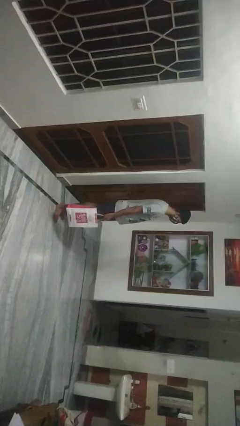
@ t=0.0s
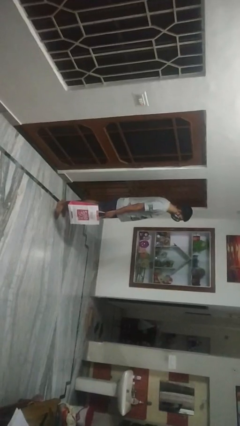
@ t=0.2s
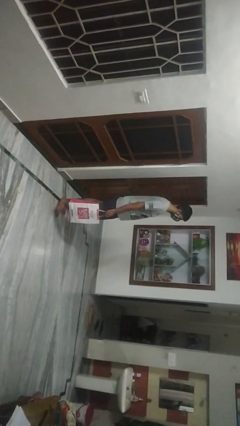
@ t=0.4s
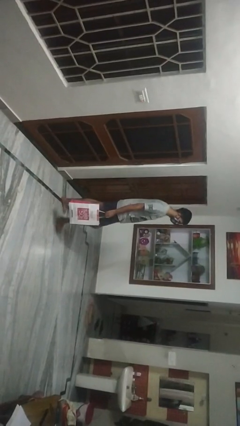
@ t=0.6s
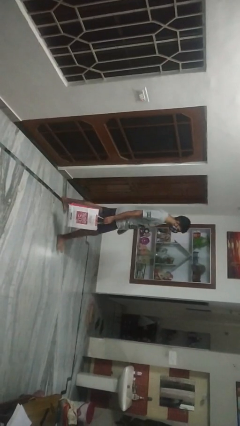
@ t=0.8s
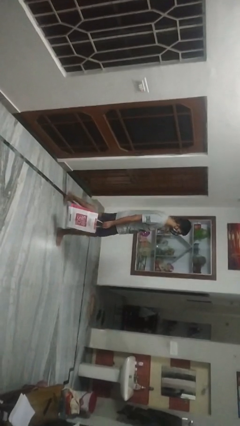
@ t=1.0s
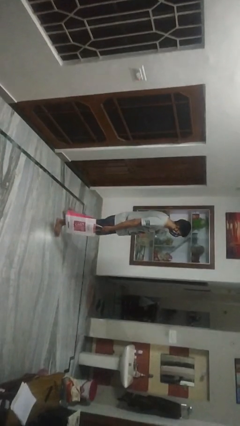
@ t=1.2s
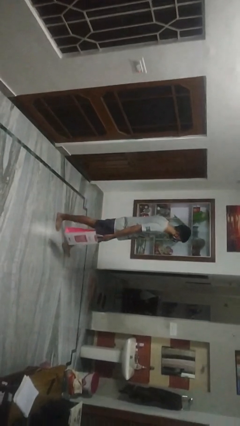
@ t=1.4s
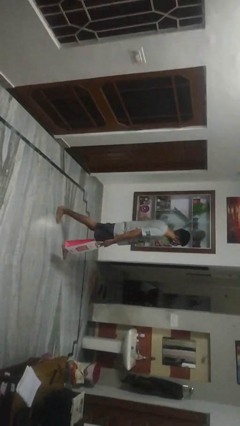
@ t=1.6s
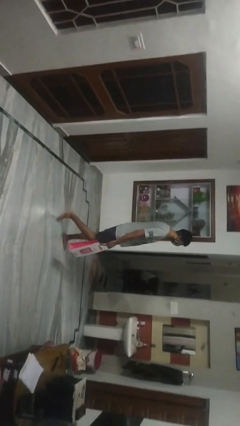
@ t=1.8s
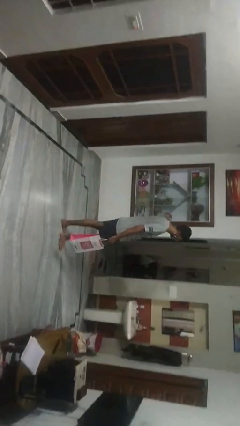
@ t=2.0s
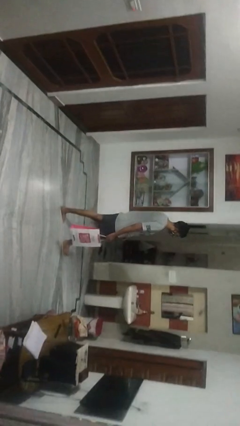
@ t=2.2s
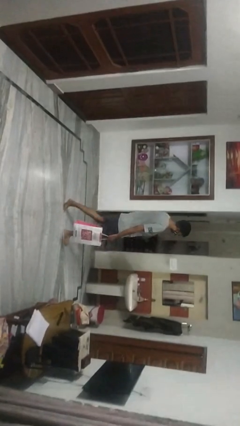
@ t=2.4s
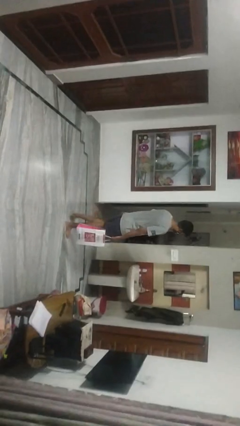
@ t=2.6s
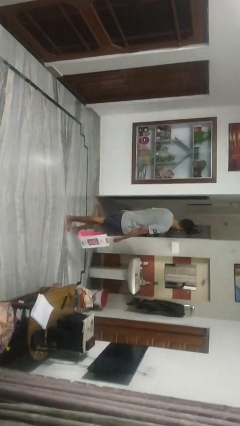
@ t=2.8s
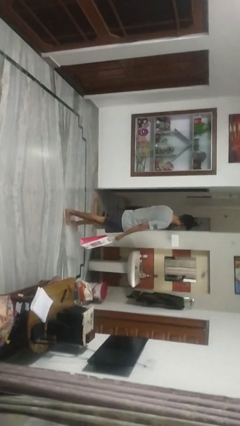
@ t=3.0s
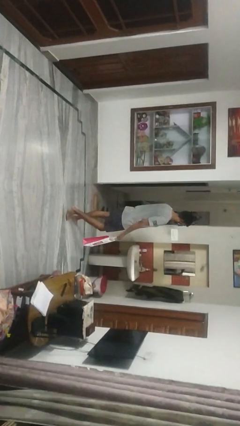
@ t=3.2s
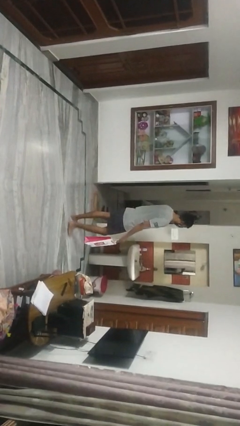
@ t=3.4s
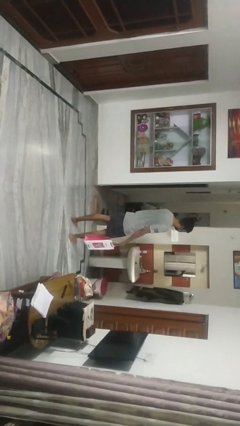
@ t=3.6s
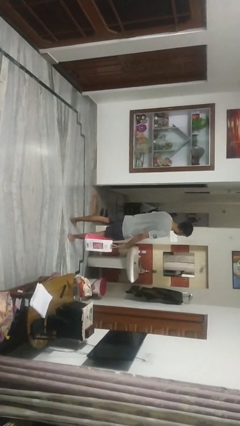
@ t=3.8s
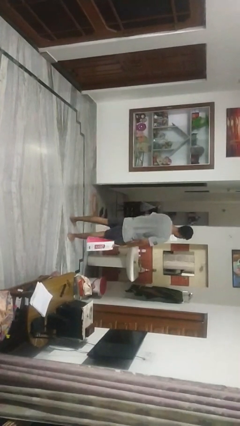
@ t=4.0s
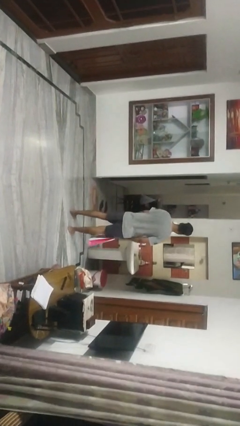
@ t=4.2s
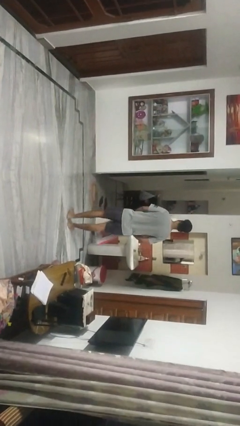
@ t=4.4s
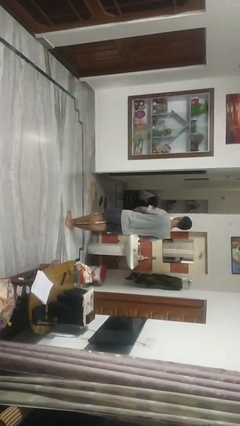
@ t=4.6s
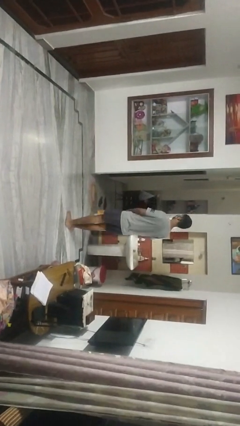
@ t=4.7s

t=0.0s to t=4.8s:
person carries groceries

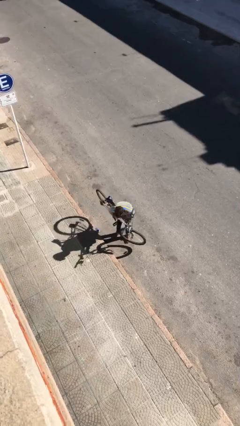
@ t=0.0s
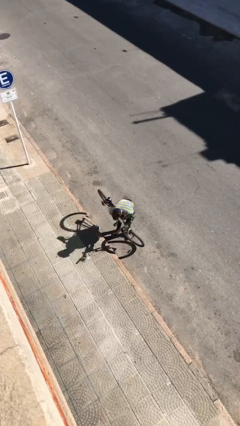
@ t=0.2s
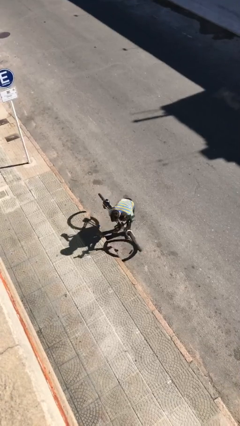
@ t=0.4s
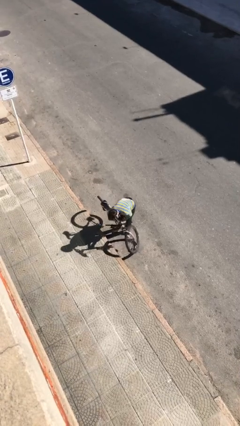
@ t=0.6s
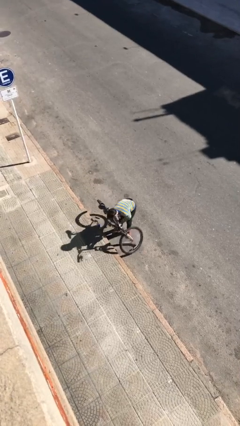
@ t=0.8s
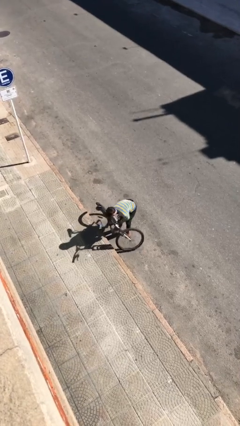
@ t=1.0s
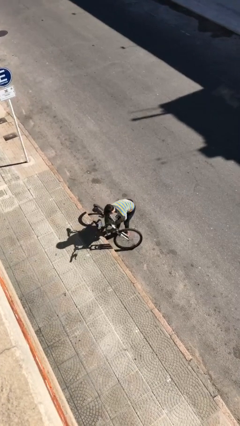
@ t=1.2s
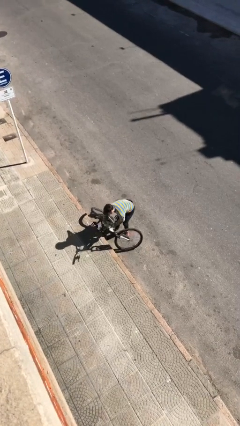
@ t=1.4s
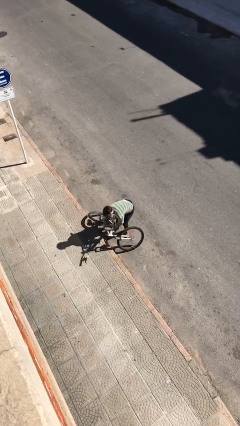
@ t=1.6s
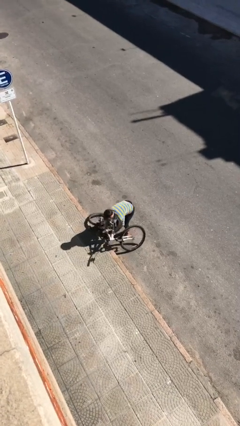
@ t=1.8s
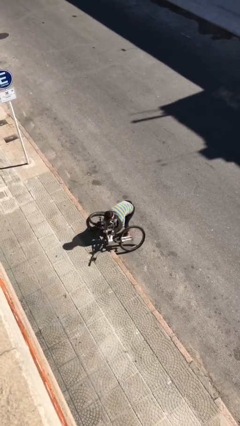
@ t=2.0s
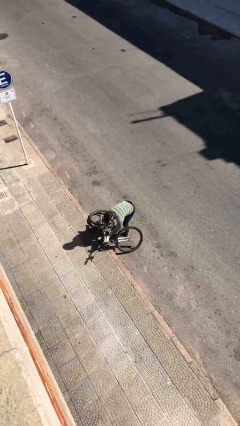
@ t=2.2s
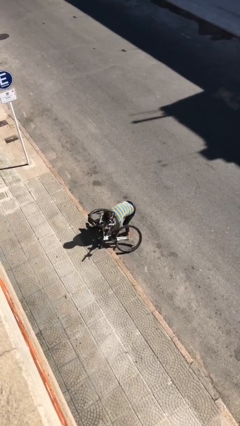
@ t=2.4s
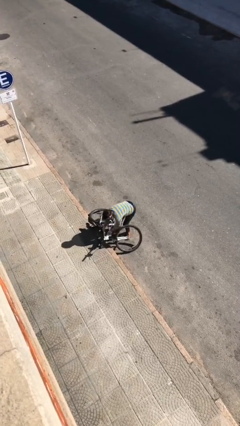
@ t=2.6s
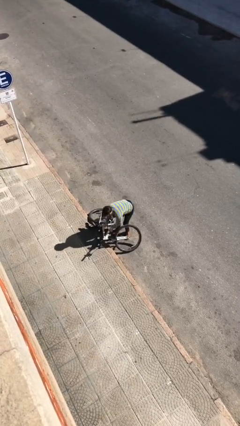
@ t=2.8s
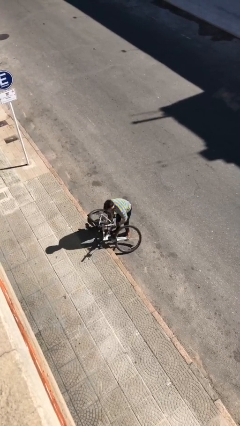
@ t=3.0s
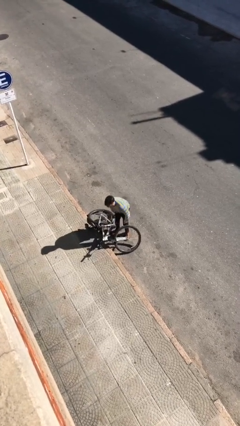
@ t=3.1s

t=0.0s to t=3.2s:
person puts down object on floor

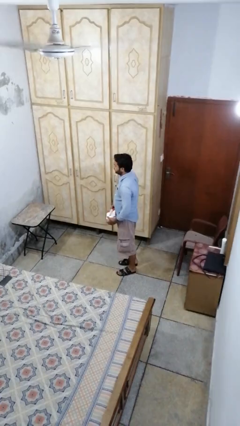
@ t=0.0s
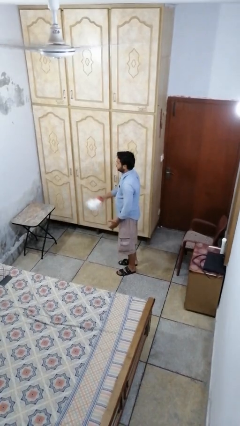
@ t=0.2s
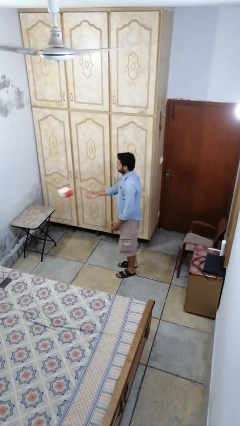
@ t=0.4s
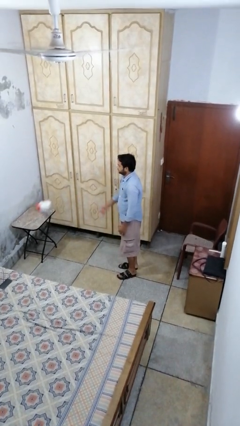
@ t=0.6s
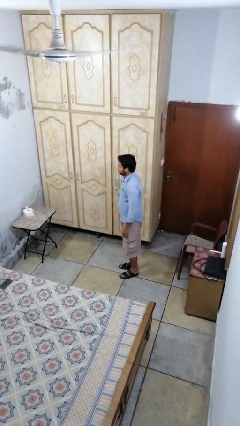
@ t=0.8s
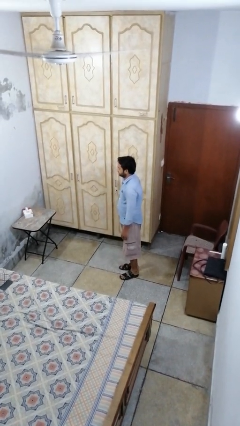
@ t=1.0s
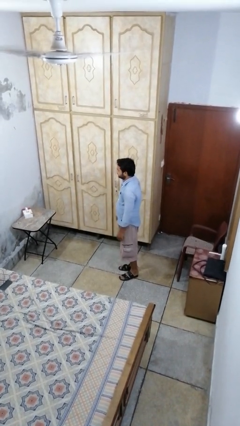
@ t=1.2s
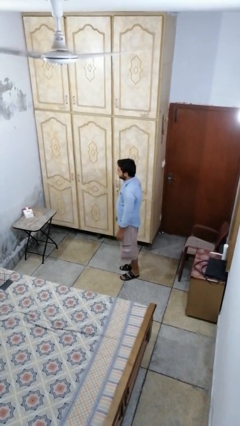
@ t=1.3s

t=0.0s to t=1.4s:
person throws object on table

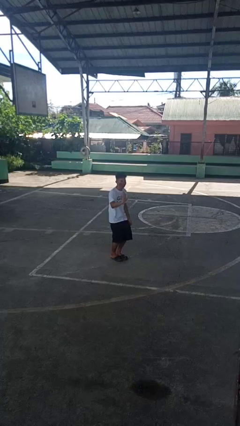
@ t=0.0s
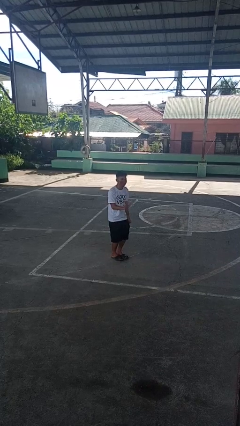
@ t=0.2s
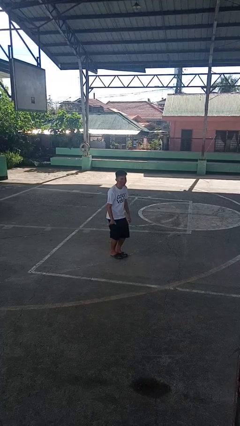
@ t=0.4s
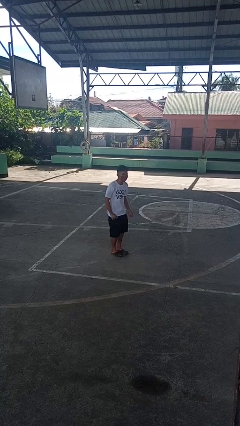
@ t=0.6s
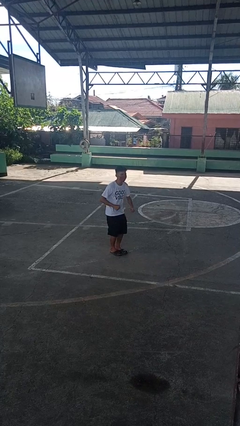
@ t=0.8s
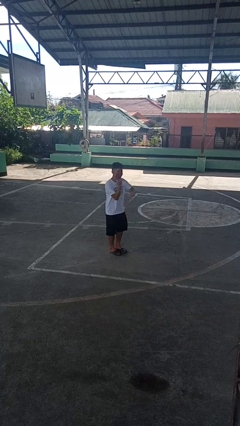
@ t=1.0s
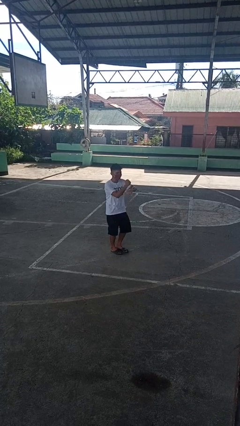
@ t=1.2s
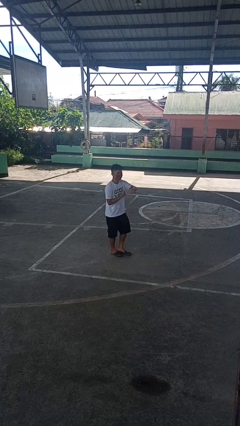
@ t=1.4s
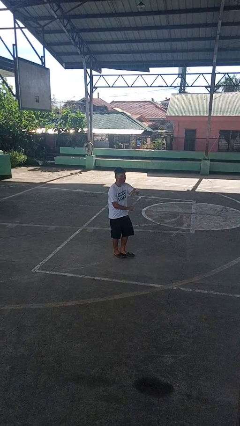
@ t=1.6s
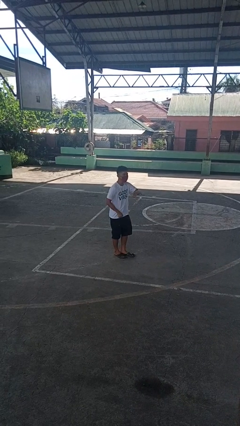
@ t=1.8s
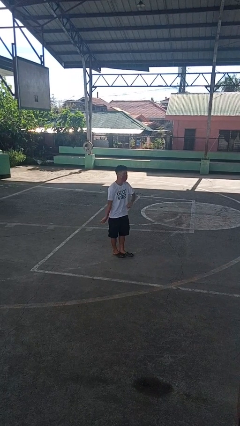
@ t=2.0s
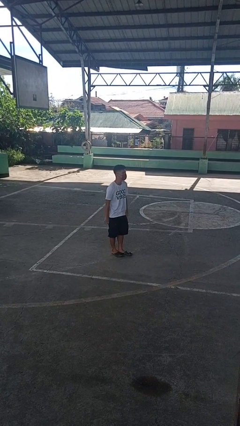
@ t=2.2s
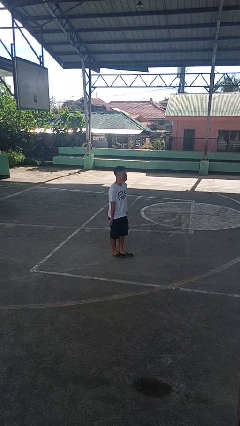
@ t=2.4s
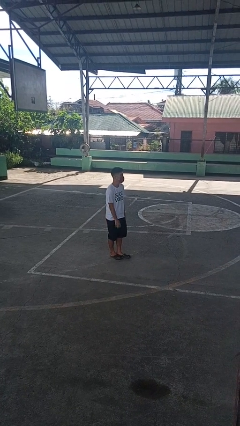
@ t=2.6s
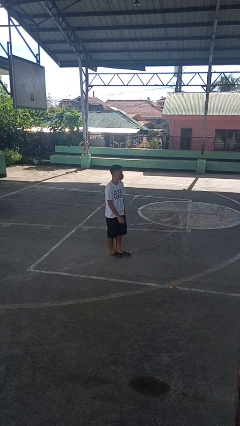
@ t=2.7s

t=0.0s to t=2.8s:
person dances in place

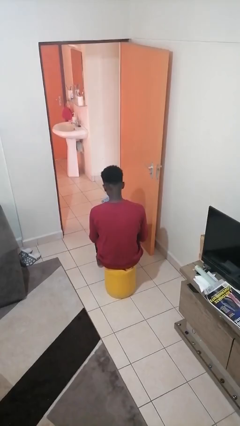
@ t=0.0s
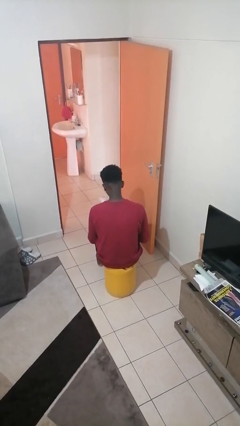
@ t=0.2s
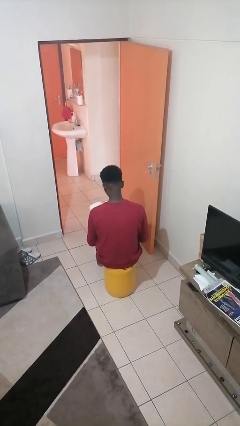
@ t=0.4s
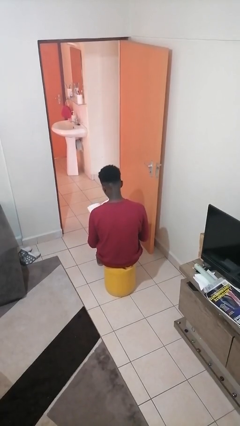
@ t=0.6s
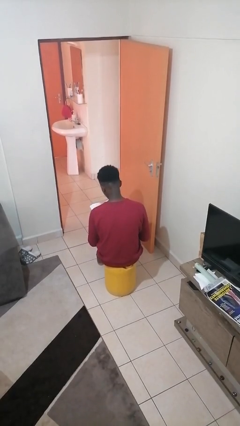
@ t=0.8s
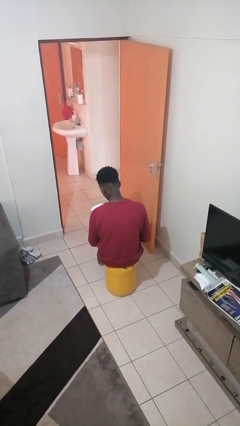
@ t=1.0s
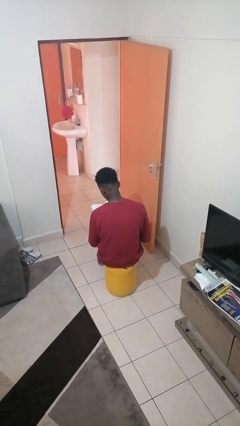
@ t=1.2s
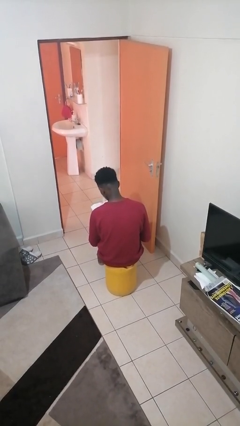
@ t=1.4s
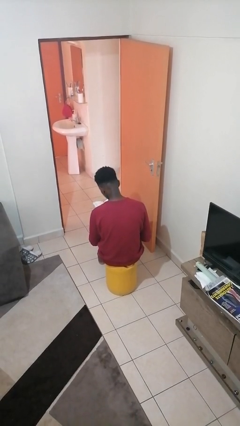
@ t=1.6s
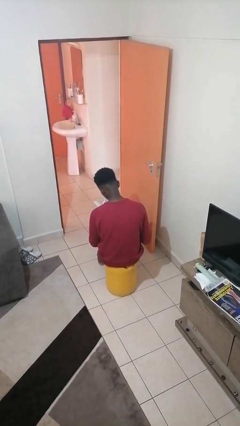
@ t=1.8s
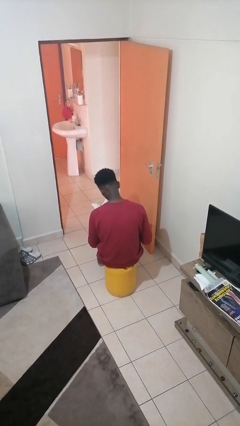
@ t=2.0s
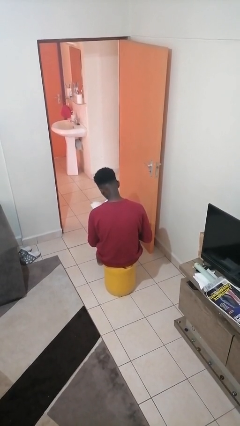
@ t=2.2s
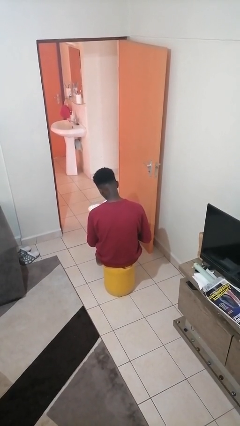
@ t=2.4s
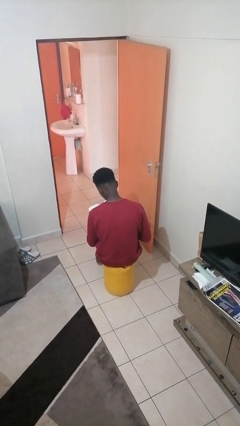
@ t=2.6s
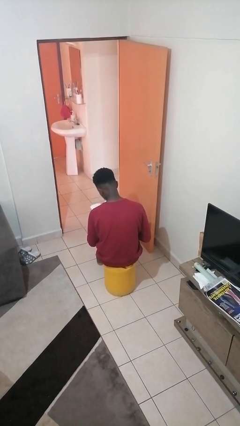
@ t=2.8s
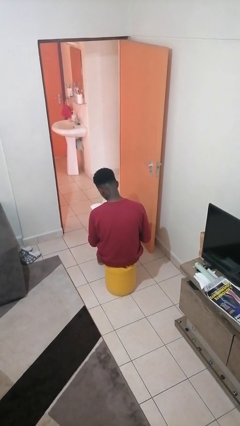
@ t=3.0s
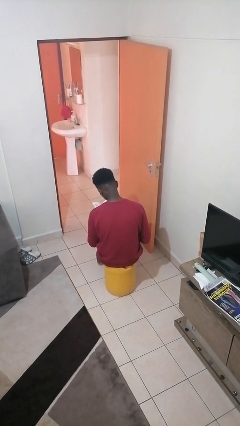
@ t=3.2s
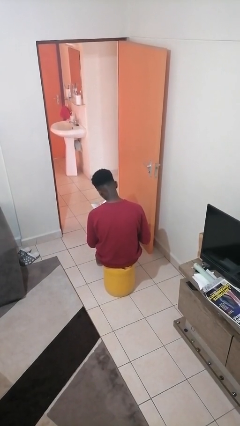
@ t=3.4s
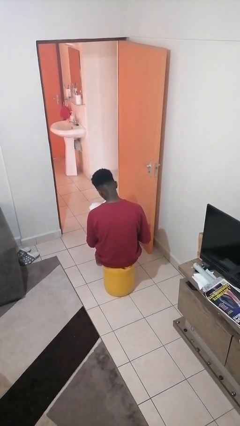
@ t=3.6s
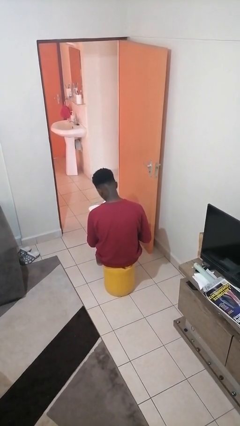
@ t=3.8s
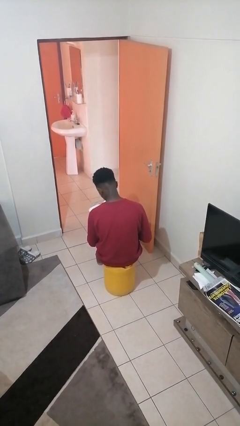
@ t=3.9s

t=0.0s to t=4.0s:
person reads book

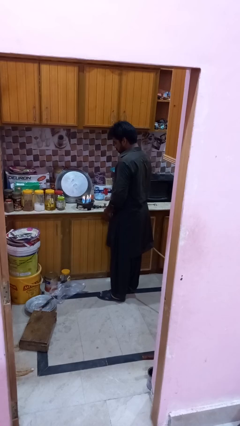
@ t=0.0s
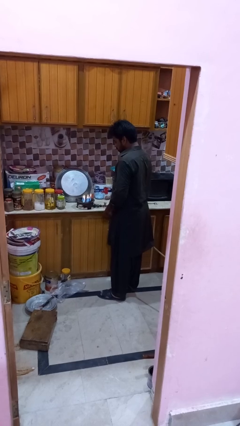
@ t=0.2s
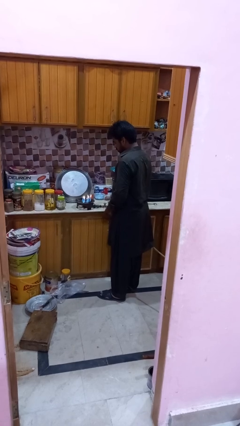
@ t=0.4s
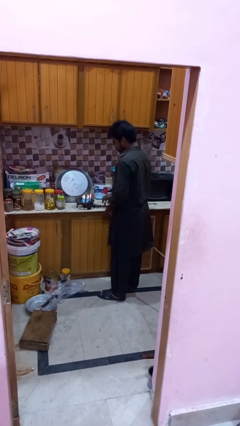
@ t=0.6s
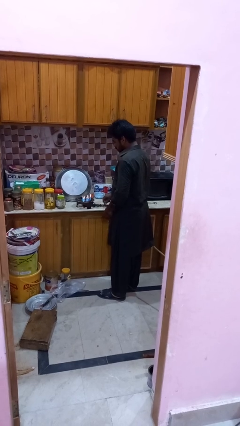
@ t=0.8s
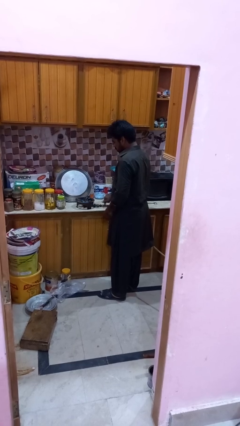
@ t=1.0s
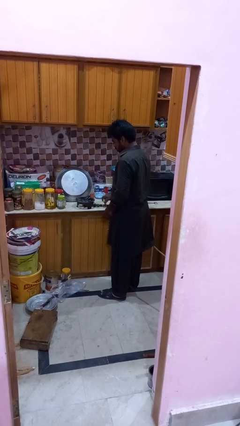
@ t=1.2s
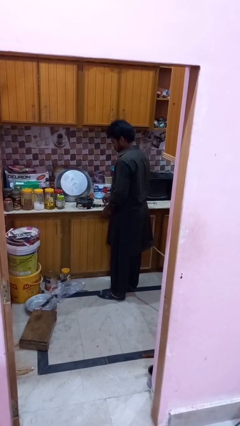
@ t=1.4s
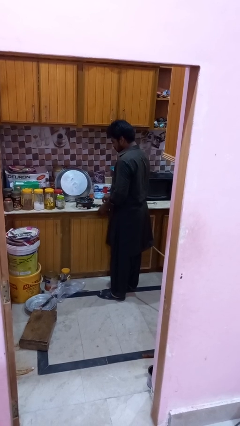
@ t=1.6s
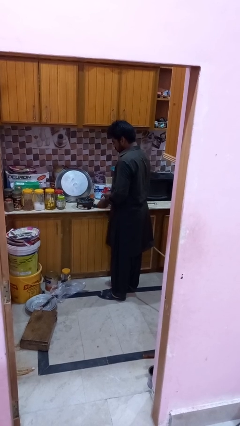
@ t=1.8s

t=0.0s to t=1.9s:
person turns off stovetop
